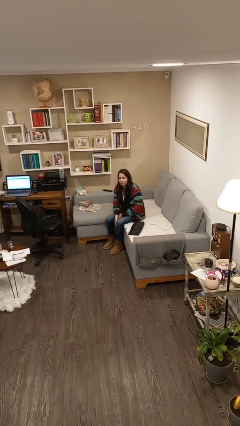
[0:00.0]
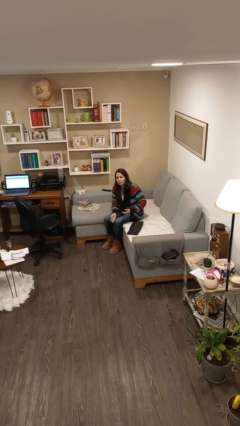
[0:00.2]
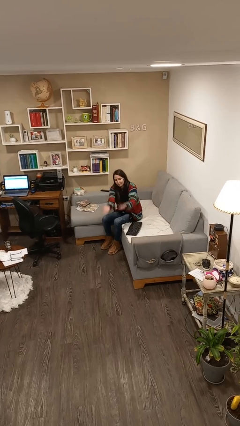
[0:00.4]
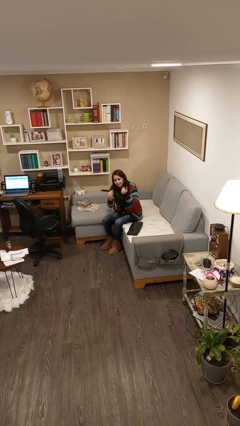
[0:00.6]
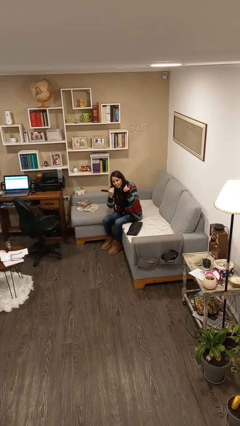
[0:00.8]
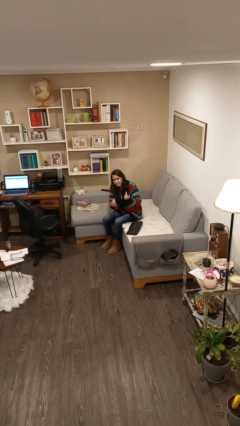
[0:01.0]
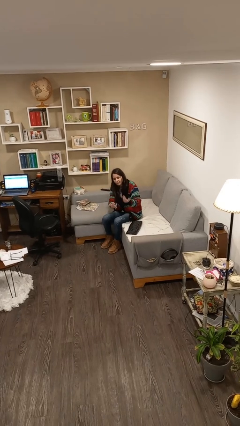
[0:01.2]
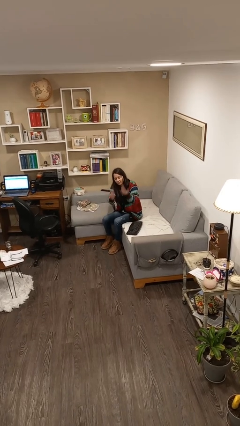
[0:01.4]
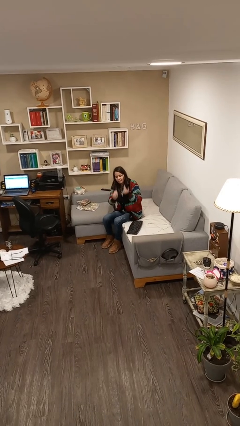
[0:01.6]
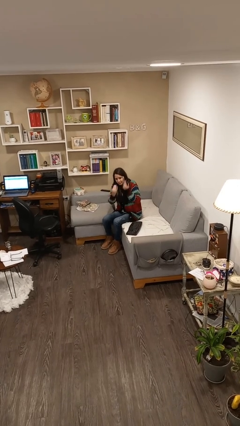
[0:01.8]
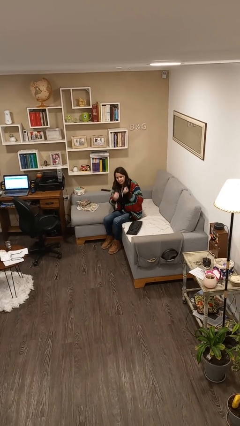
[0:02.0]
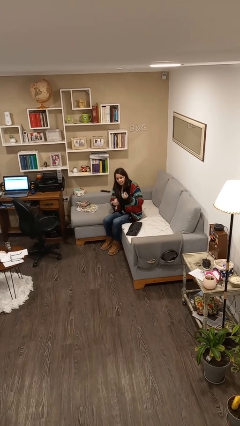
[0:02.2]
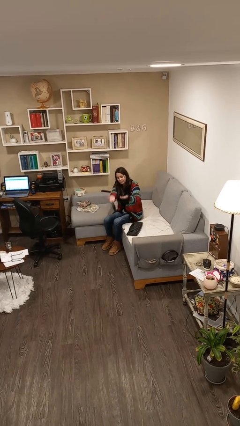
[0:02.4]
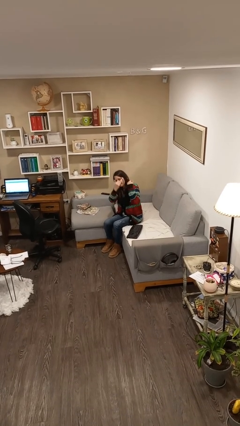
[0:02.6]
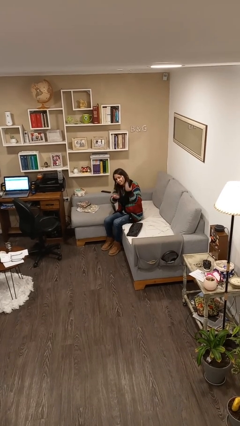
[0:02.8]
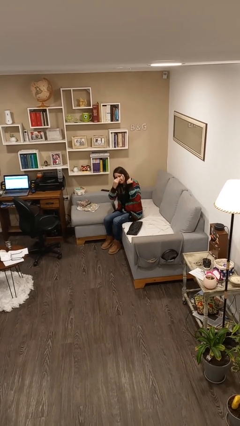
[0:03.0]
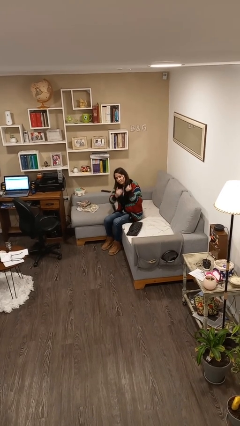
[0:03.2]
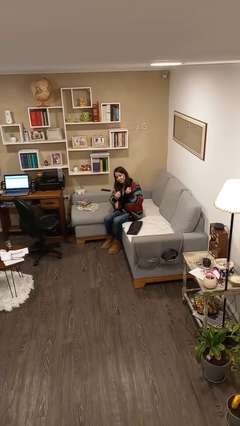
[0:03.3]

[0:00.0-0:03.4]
person gestures come here

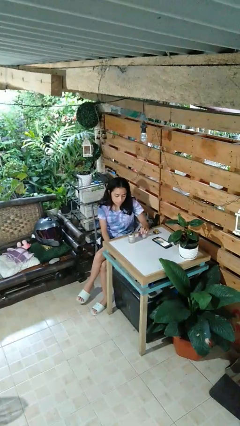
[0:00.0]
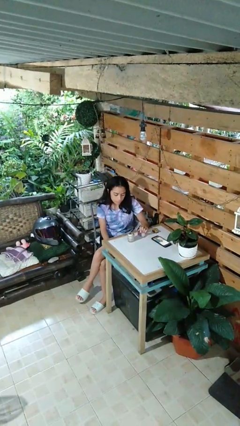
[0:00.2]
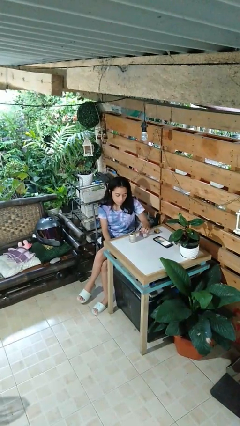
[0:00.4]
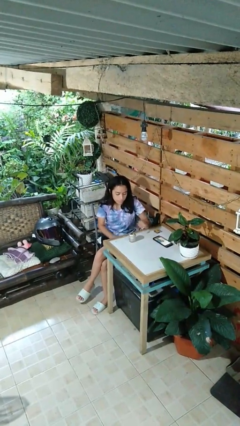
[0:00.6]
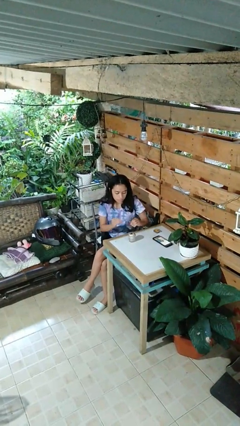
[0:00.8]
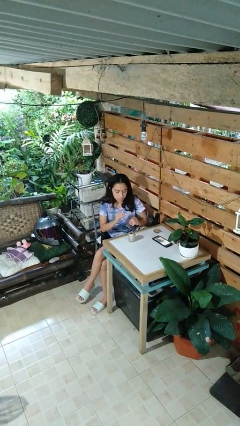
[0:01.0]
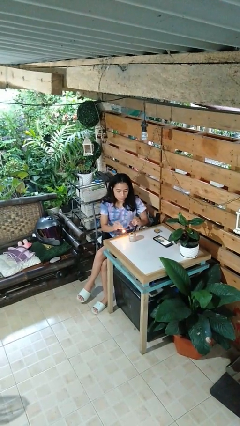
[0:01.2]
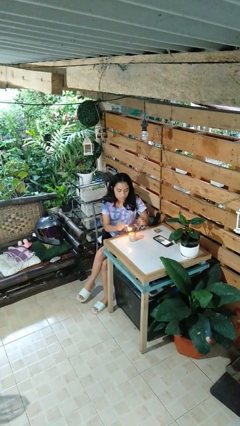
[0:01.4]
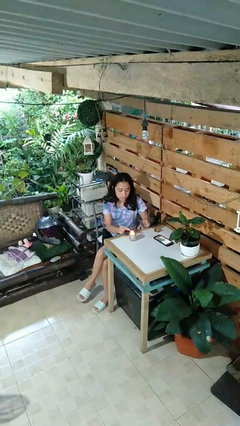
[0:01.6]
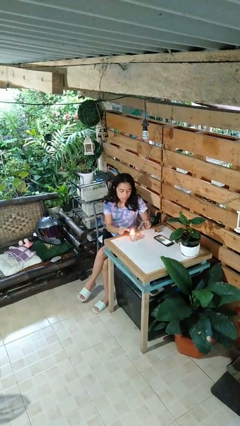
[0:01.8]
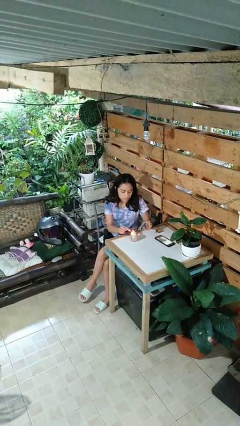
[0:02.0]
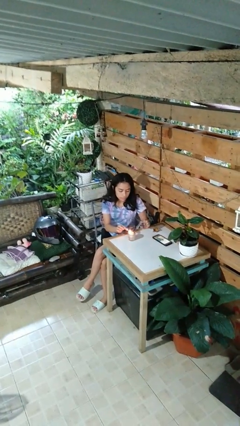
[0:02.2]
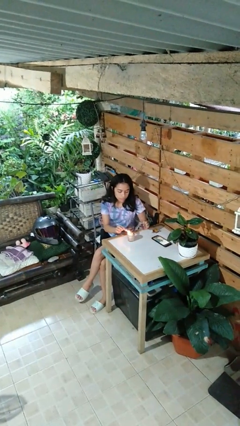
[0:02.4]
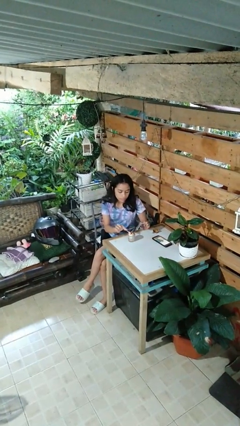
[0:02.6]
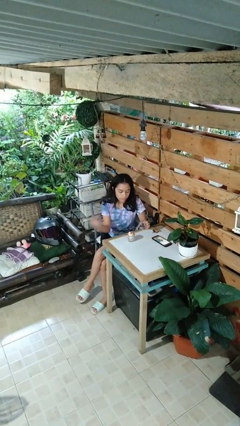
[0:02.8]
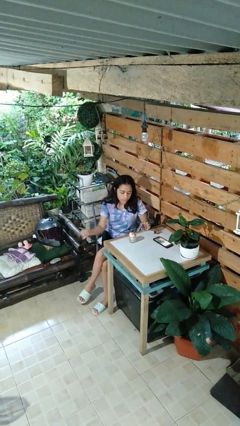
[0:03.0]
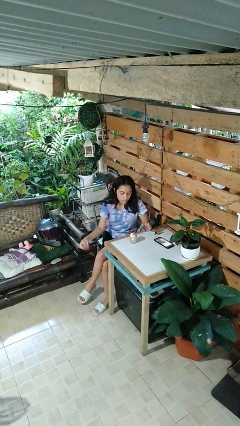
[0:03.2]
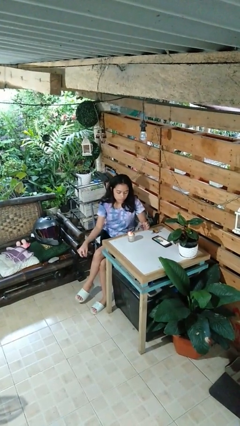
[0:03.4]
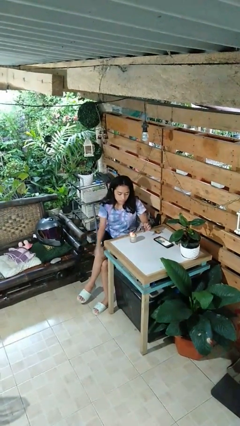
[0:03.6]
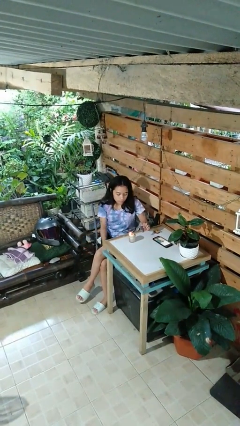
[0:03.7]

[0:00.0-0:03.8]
person lights candle

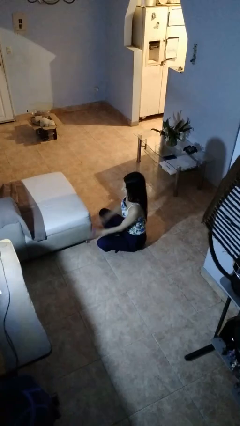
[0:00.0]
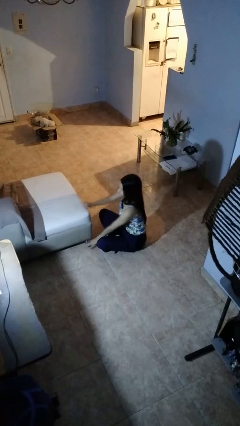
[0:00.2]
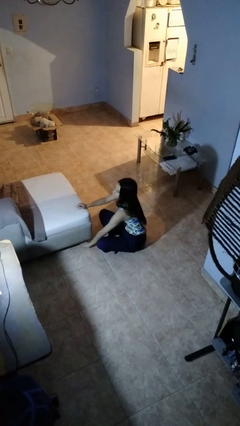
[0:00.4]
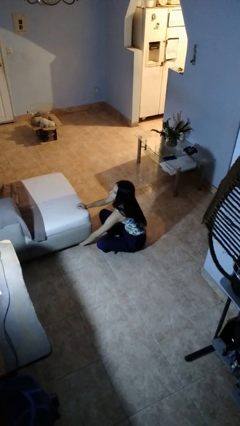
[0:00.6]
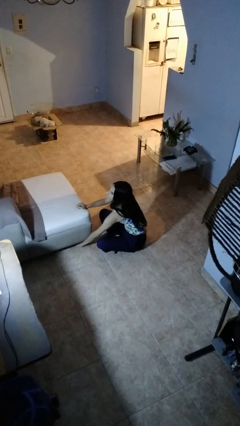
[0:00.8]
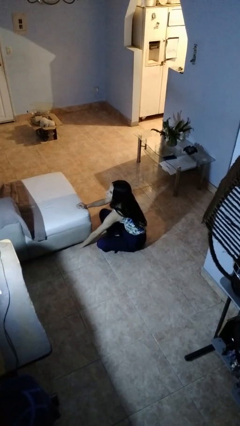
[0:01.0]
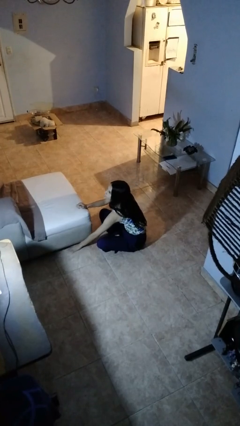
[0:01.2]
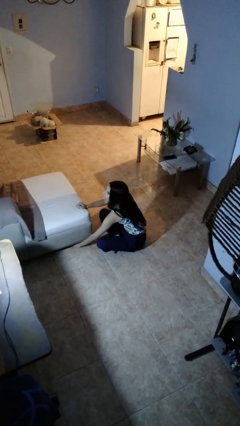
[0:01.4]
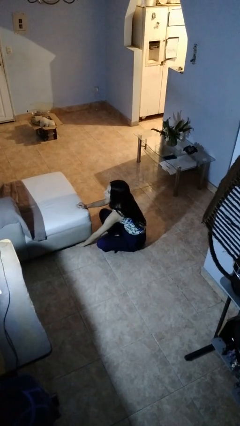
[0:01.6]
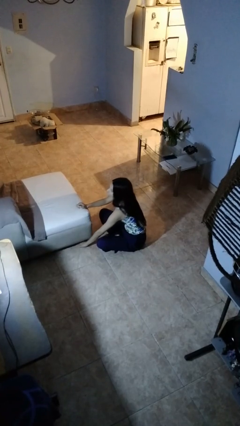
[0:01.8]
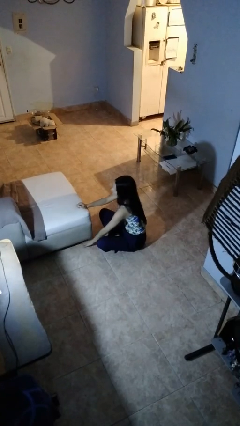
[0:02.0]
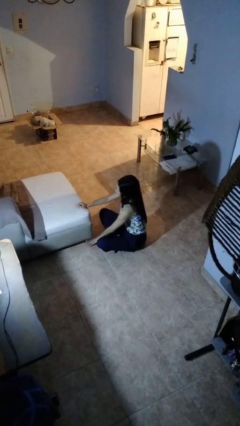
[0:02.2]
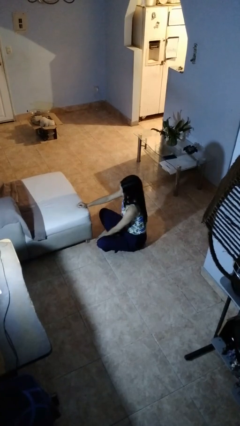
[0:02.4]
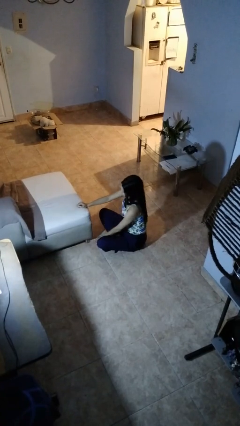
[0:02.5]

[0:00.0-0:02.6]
person searches under couch

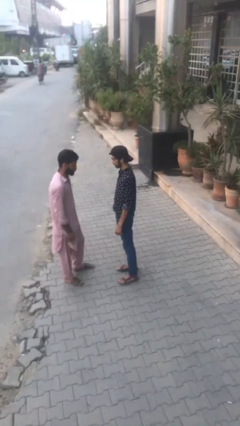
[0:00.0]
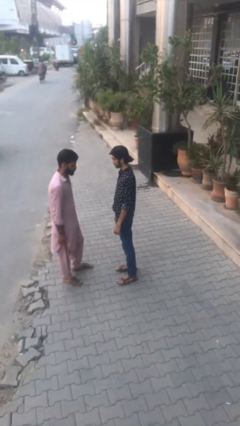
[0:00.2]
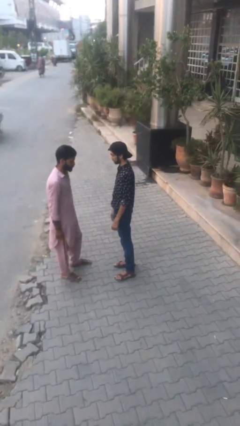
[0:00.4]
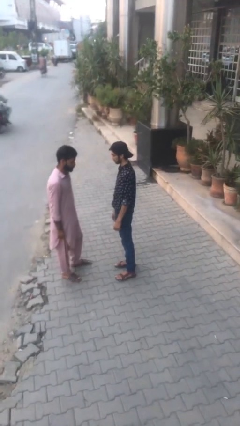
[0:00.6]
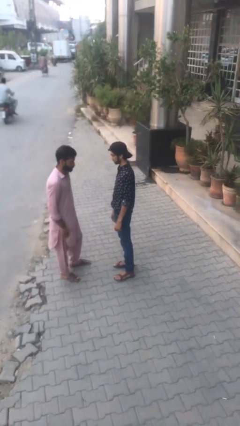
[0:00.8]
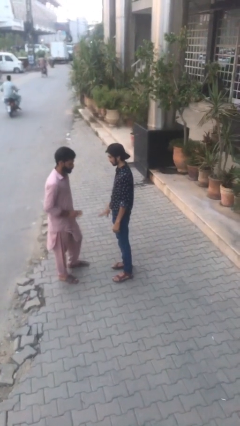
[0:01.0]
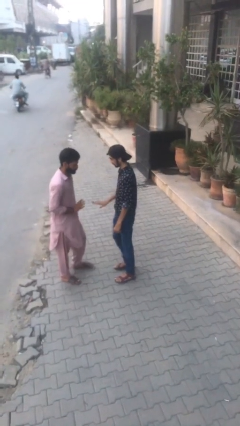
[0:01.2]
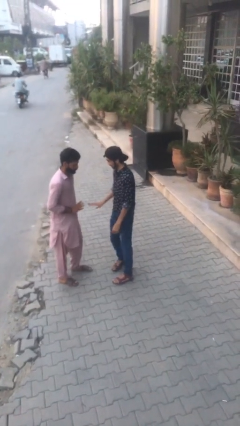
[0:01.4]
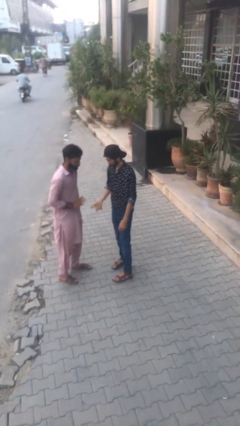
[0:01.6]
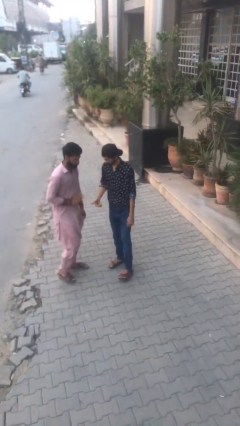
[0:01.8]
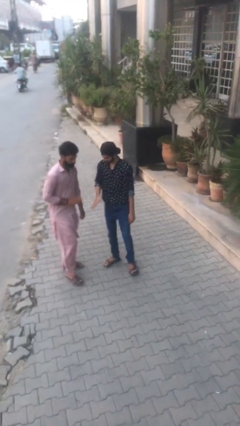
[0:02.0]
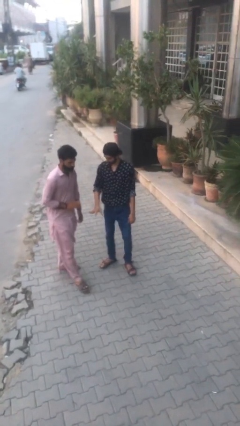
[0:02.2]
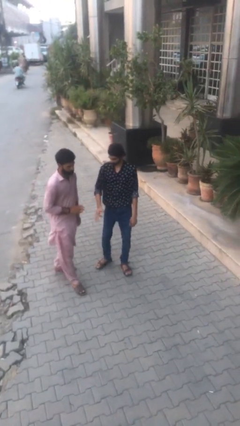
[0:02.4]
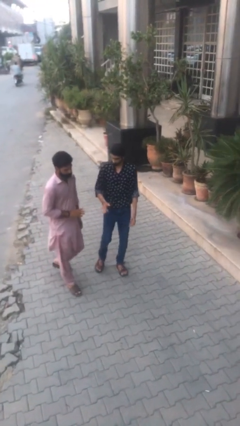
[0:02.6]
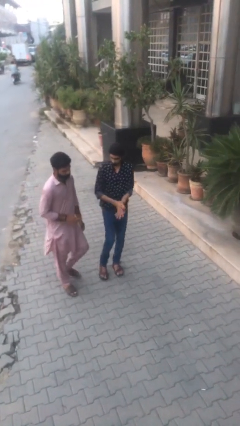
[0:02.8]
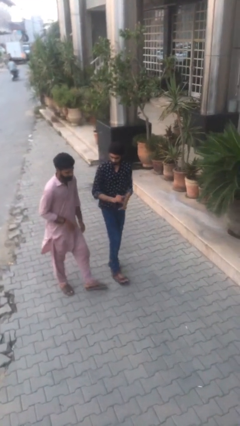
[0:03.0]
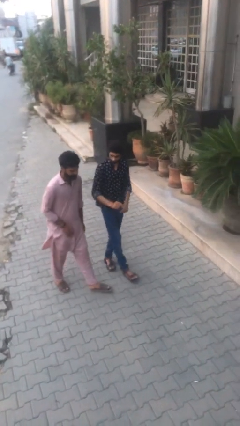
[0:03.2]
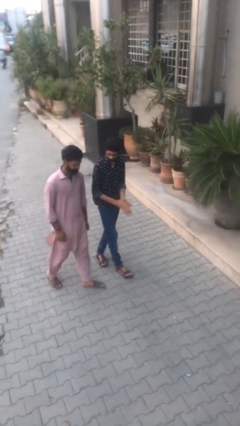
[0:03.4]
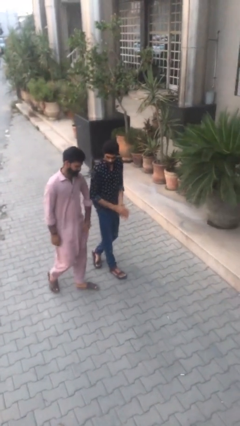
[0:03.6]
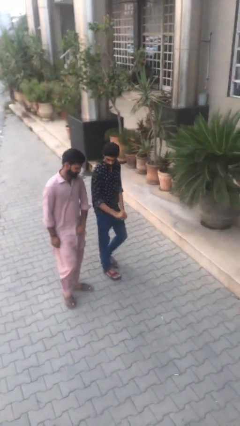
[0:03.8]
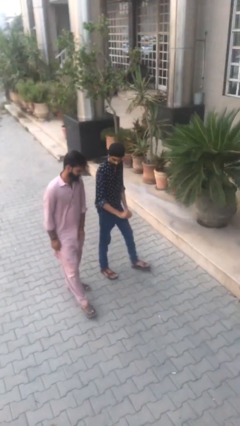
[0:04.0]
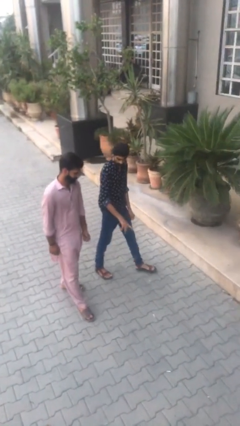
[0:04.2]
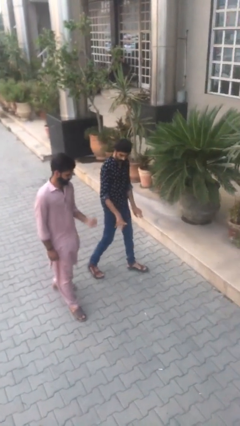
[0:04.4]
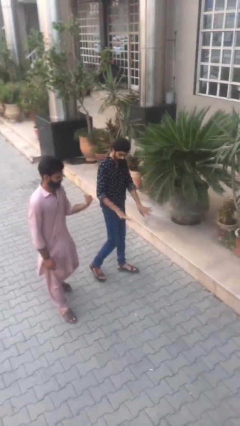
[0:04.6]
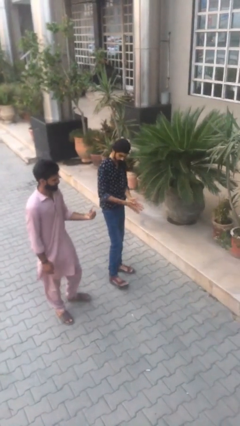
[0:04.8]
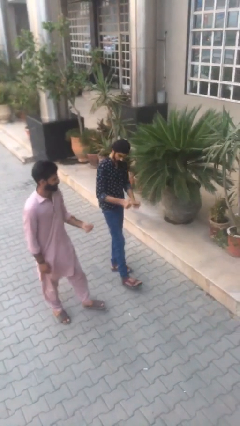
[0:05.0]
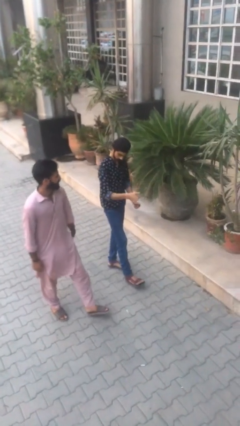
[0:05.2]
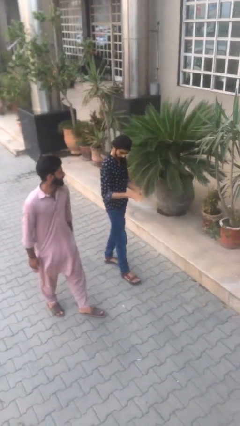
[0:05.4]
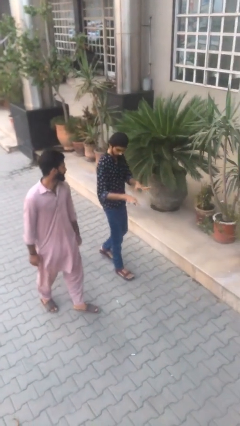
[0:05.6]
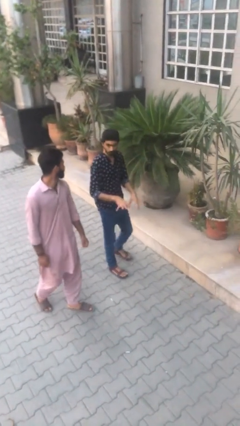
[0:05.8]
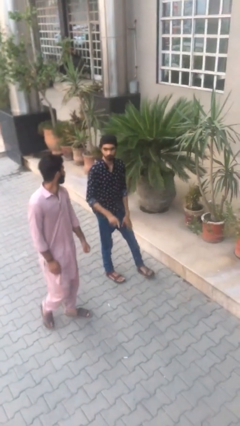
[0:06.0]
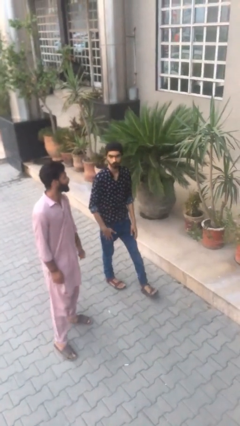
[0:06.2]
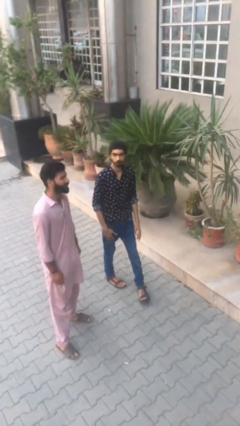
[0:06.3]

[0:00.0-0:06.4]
person talks to person

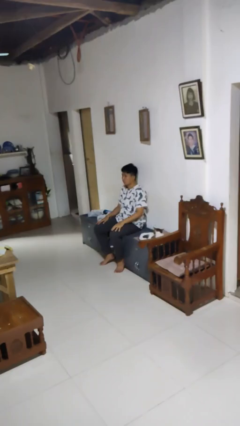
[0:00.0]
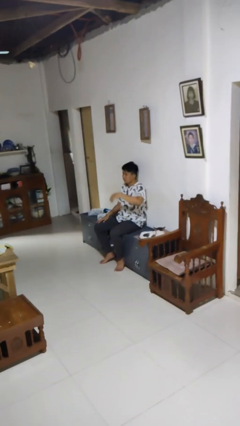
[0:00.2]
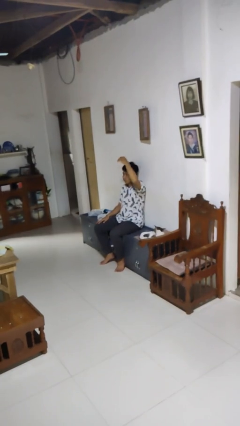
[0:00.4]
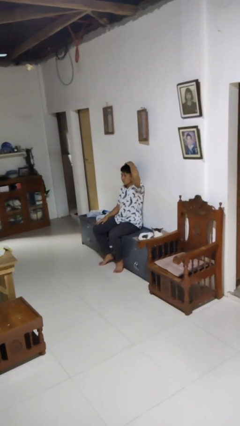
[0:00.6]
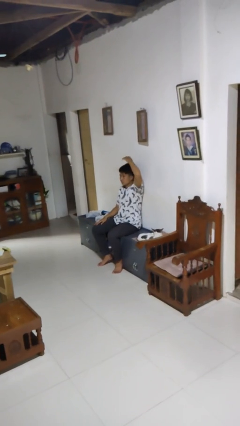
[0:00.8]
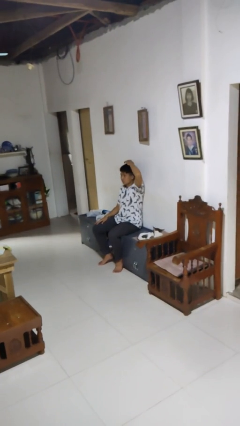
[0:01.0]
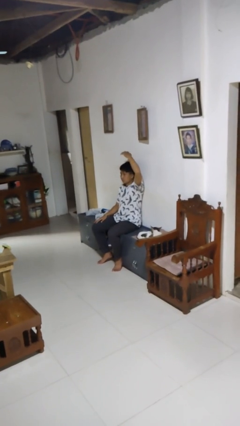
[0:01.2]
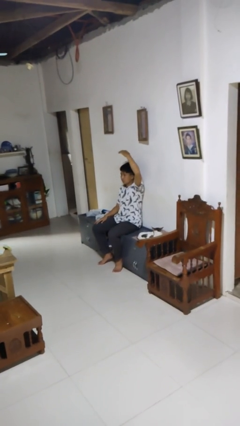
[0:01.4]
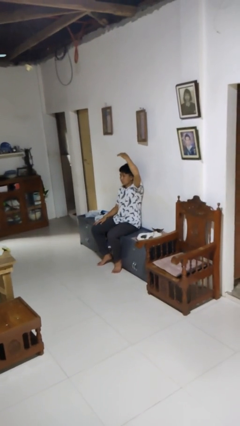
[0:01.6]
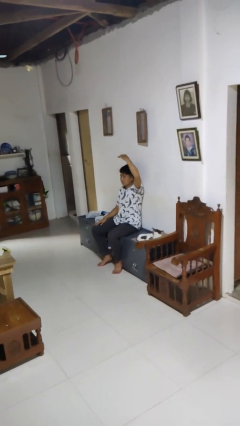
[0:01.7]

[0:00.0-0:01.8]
person pats head
